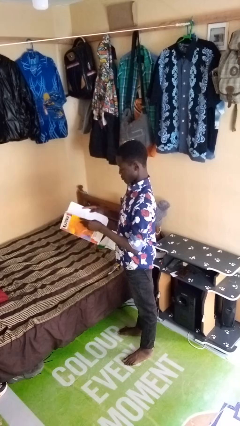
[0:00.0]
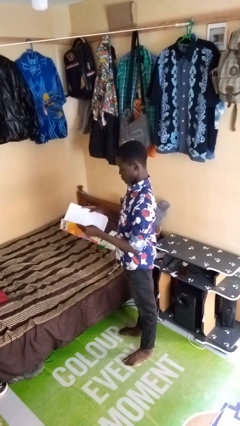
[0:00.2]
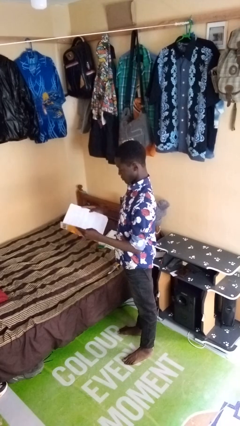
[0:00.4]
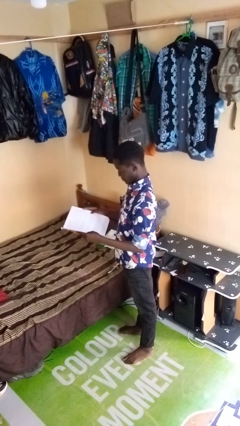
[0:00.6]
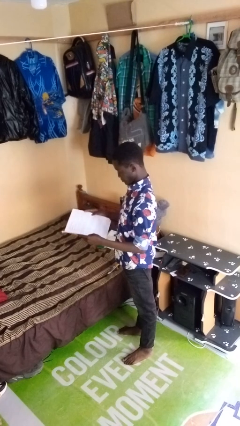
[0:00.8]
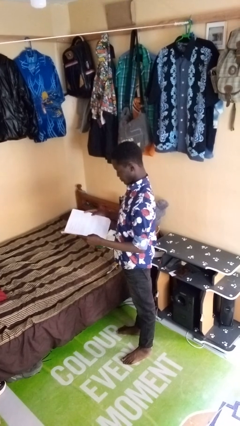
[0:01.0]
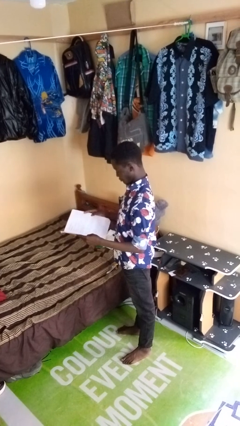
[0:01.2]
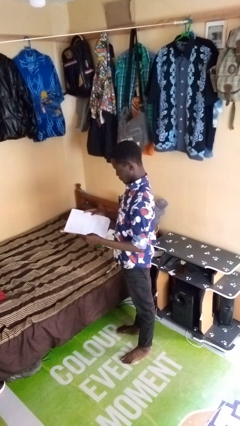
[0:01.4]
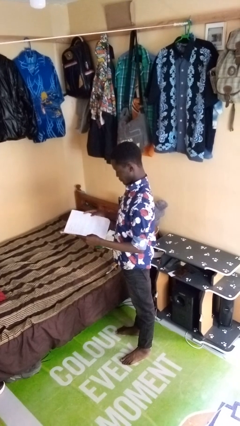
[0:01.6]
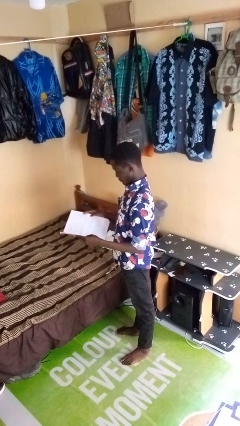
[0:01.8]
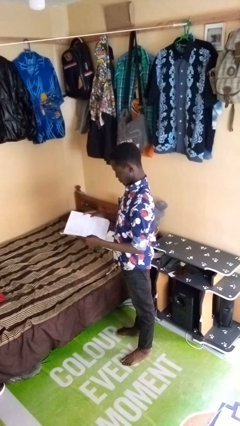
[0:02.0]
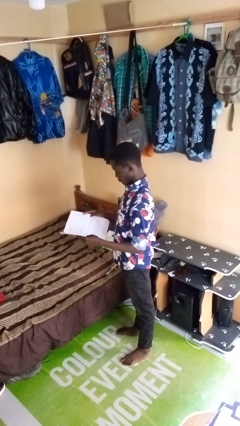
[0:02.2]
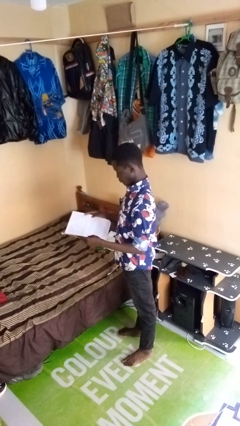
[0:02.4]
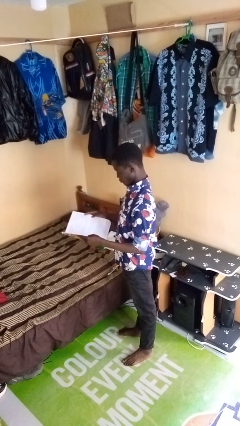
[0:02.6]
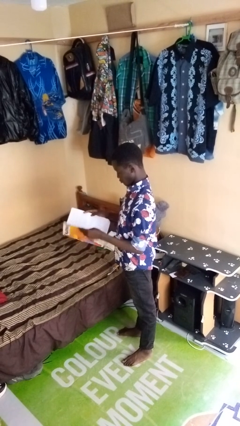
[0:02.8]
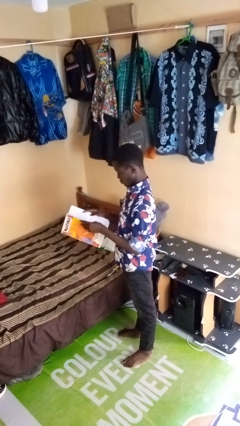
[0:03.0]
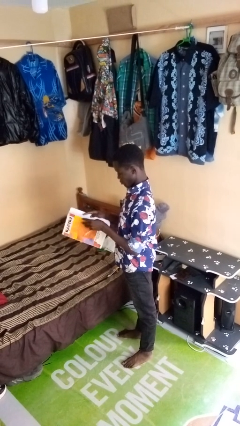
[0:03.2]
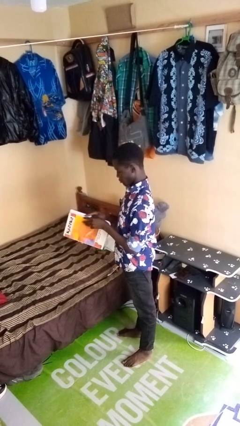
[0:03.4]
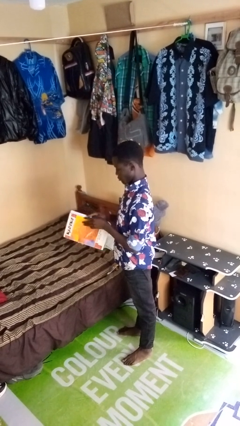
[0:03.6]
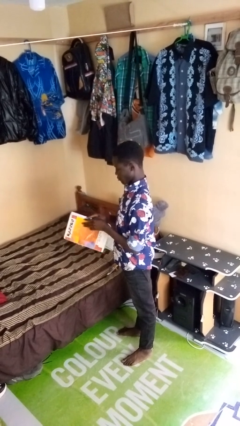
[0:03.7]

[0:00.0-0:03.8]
person reads newspaper

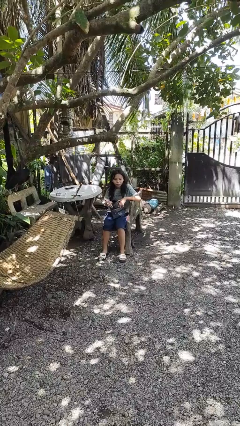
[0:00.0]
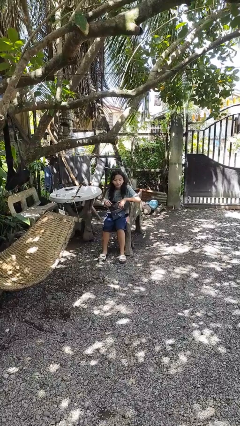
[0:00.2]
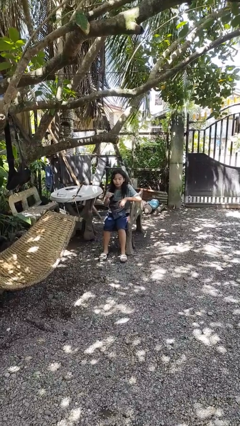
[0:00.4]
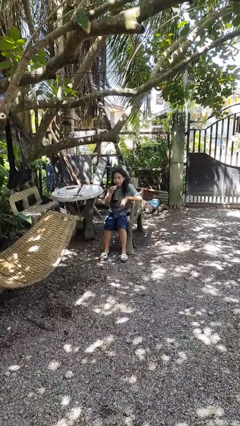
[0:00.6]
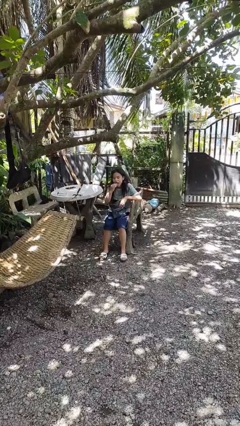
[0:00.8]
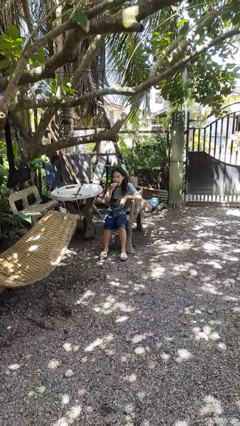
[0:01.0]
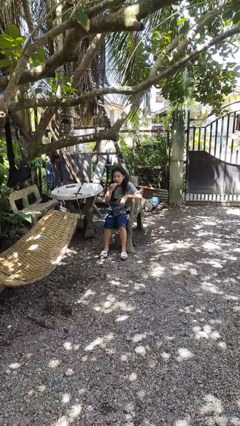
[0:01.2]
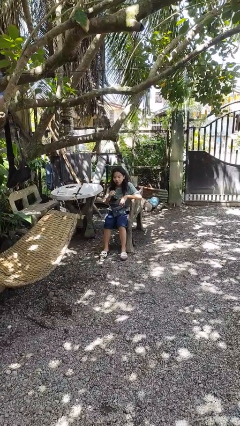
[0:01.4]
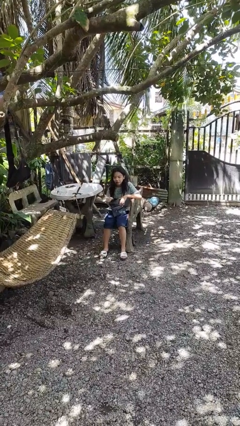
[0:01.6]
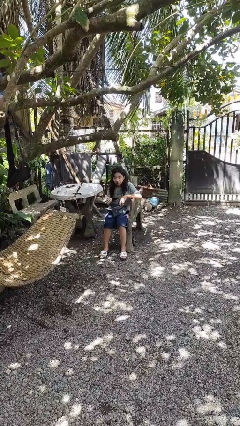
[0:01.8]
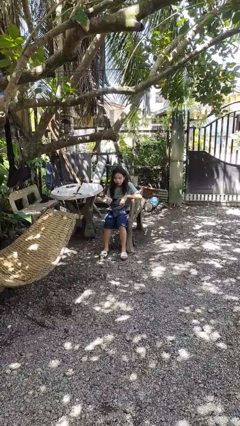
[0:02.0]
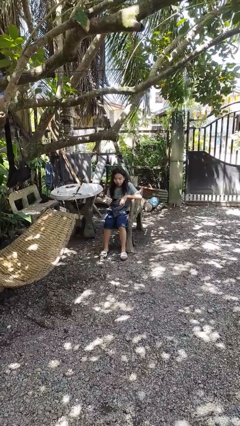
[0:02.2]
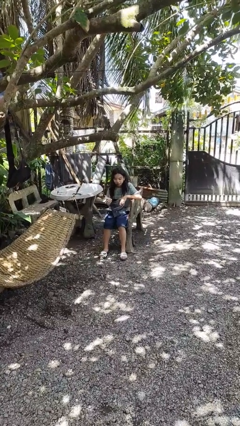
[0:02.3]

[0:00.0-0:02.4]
person eats snack from bag

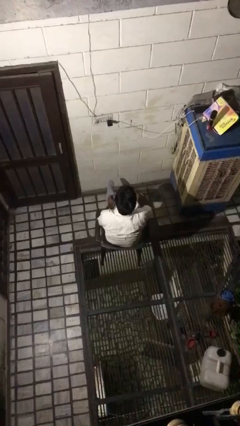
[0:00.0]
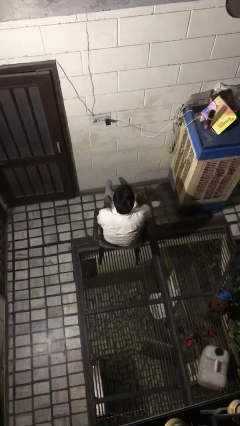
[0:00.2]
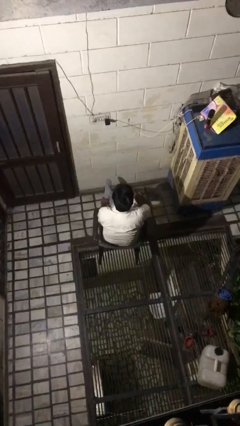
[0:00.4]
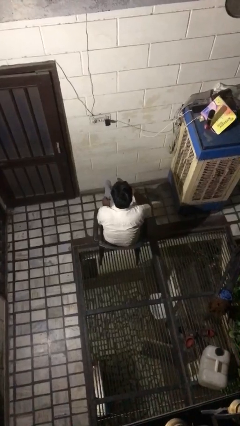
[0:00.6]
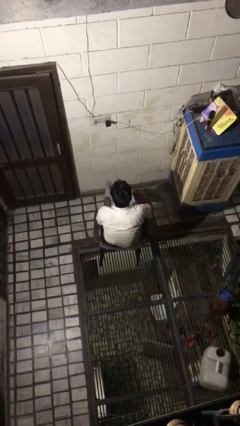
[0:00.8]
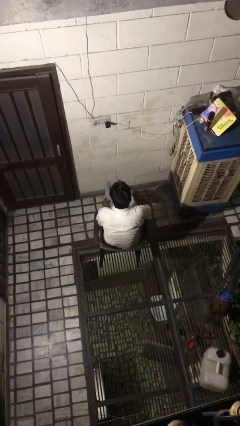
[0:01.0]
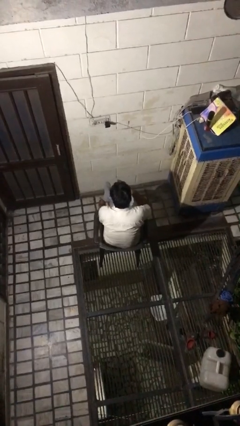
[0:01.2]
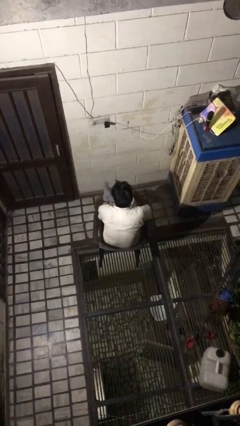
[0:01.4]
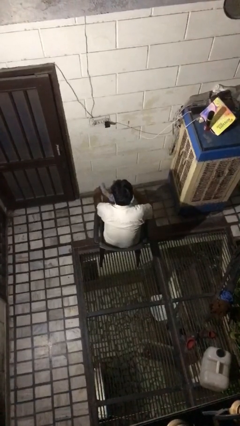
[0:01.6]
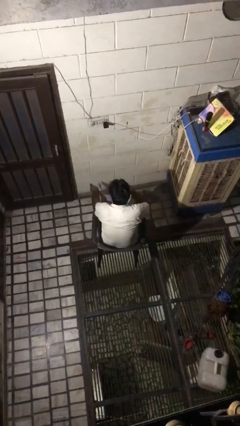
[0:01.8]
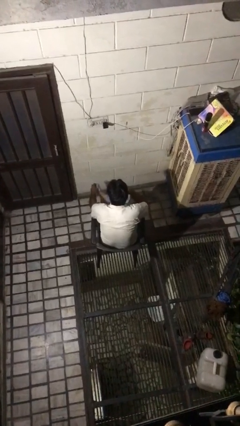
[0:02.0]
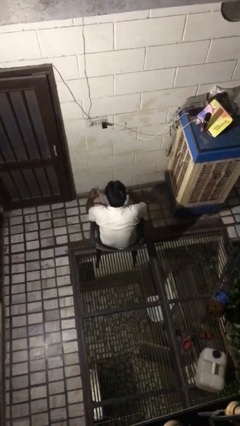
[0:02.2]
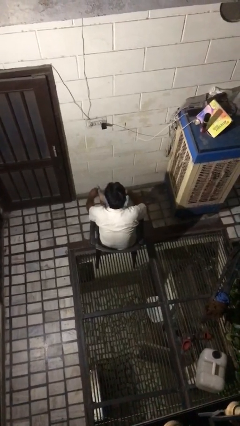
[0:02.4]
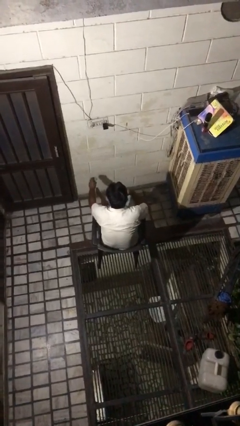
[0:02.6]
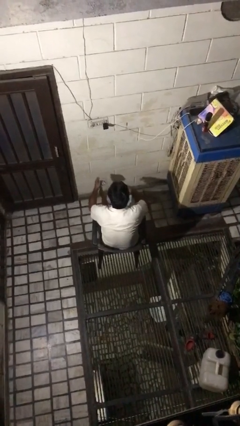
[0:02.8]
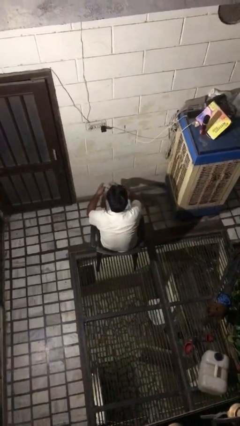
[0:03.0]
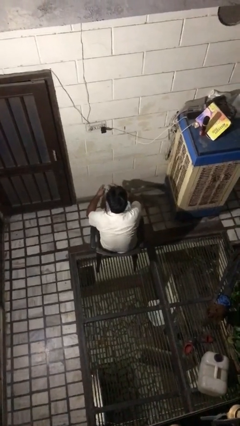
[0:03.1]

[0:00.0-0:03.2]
person takes off socks

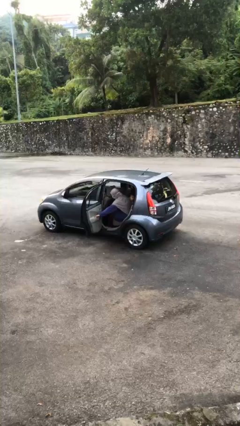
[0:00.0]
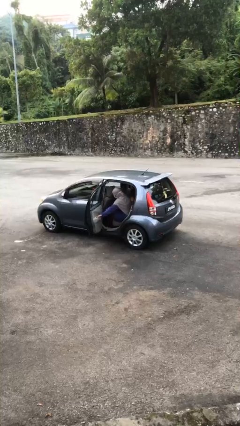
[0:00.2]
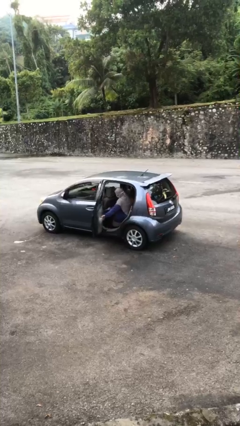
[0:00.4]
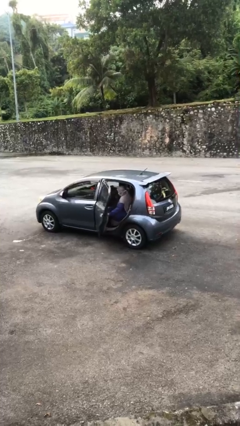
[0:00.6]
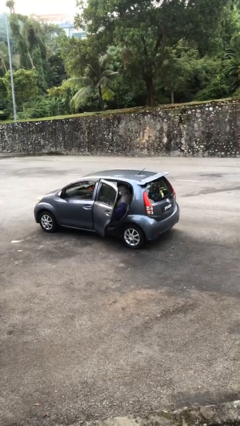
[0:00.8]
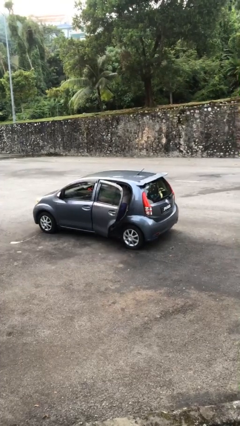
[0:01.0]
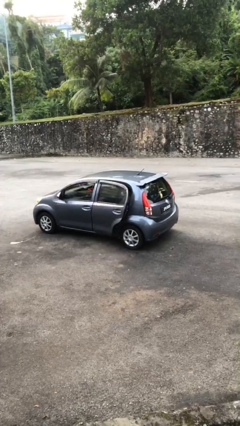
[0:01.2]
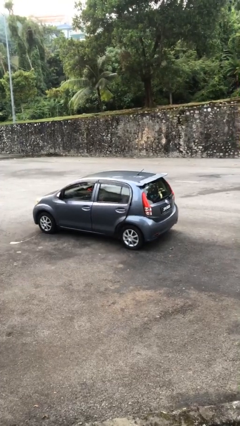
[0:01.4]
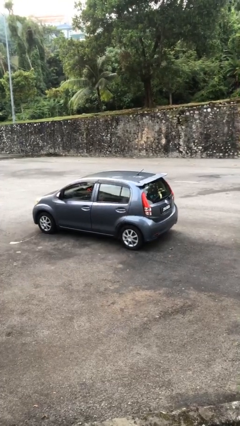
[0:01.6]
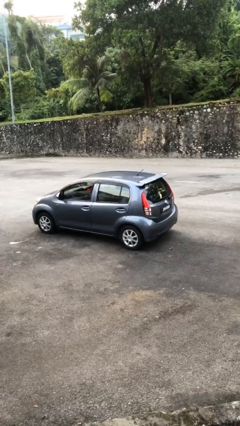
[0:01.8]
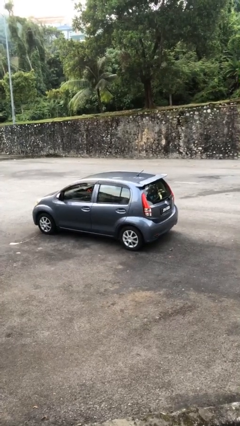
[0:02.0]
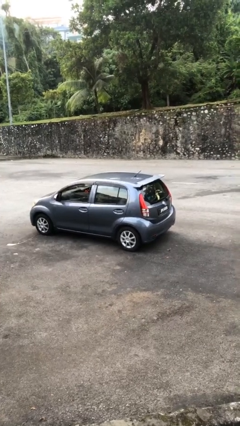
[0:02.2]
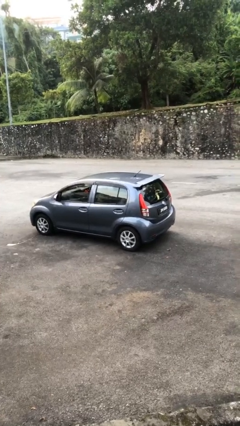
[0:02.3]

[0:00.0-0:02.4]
person closes car door

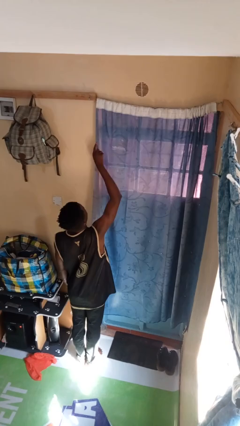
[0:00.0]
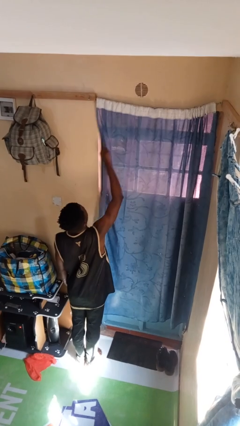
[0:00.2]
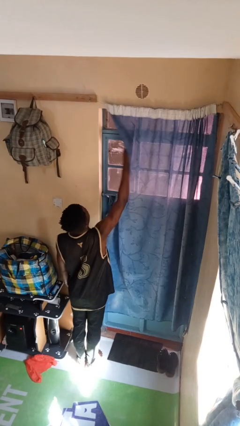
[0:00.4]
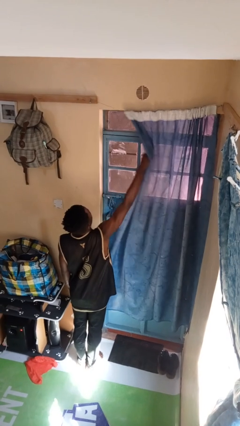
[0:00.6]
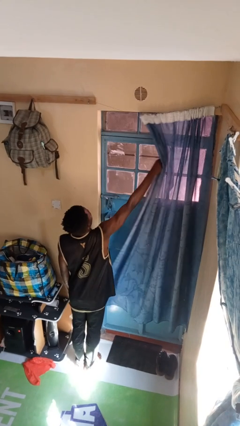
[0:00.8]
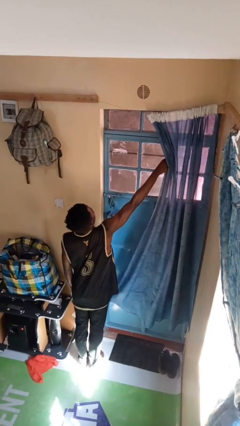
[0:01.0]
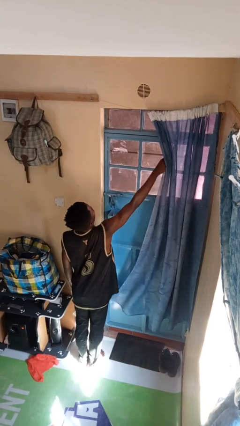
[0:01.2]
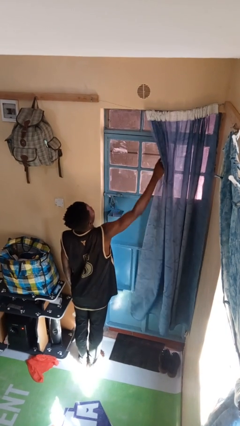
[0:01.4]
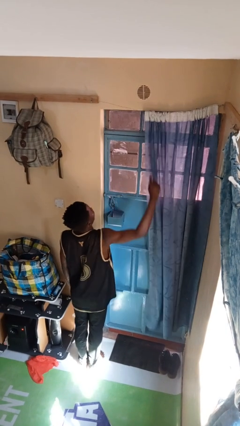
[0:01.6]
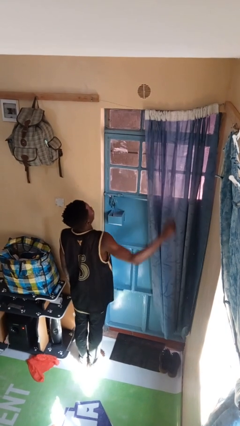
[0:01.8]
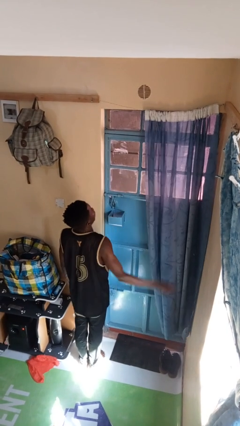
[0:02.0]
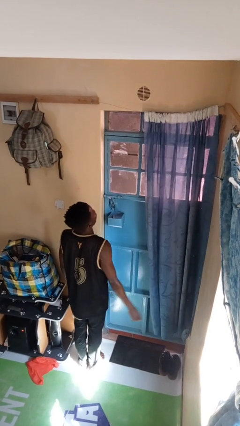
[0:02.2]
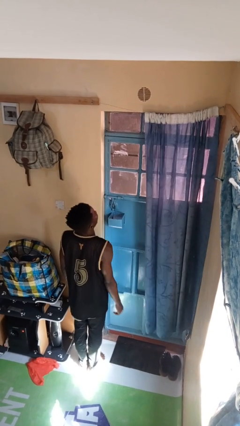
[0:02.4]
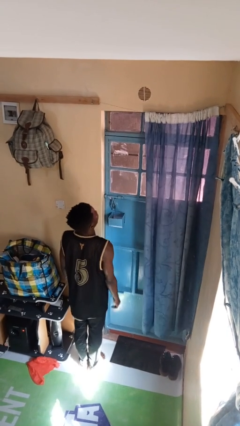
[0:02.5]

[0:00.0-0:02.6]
person opens curtains

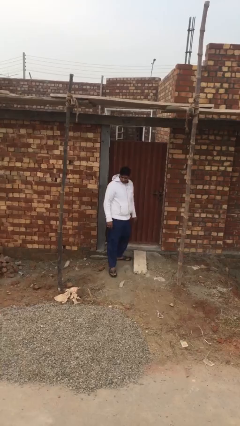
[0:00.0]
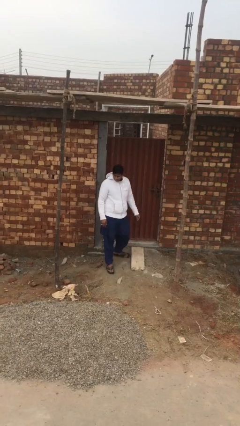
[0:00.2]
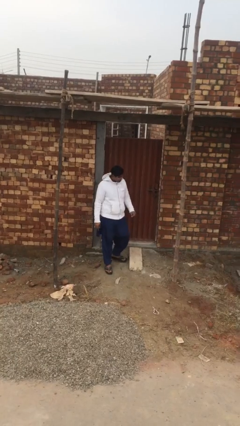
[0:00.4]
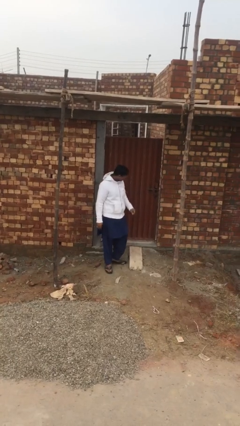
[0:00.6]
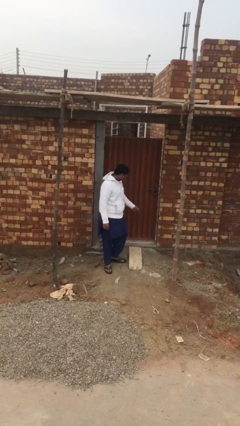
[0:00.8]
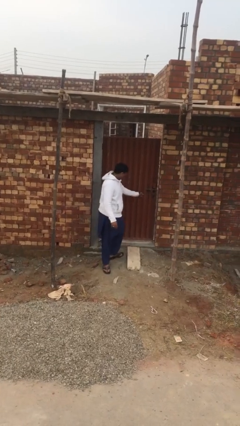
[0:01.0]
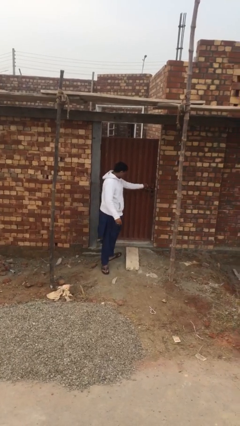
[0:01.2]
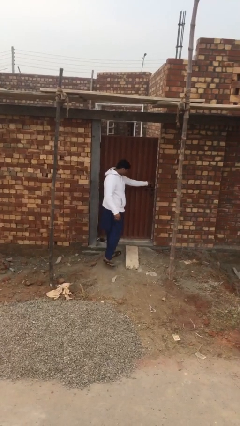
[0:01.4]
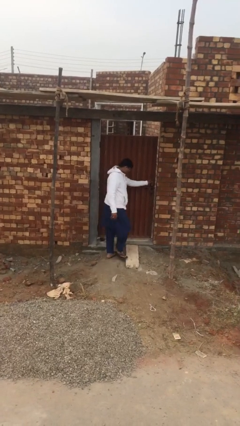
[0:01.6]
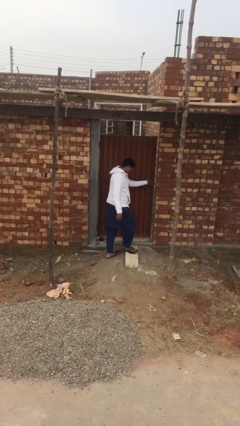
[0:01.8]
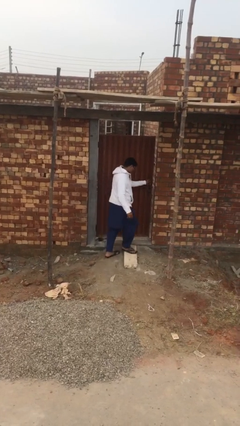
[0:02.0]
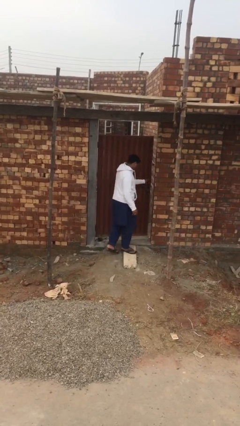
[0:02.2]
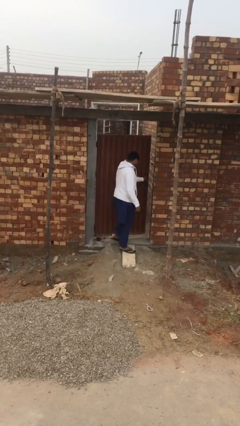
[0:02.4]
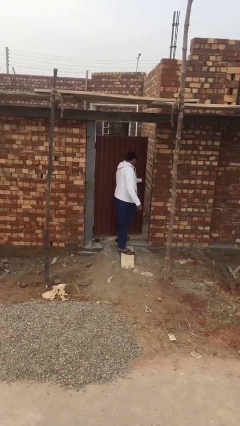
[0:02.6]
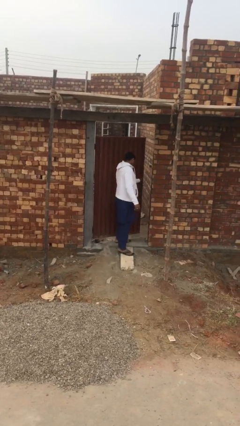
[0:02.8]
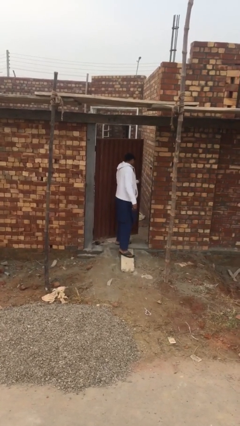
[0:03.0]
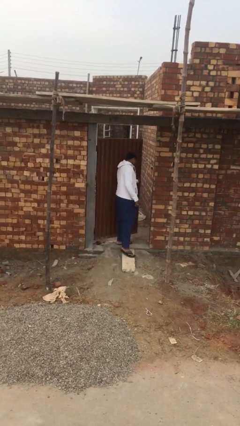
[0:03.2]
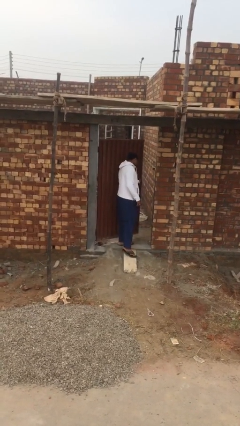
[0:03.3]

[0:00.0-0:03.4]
person opens facility door
